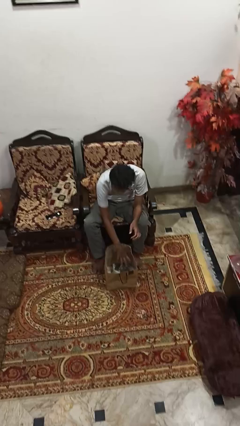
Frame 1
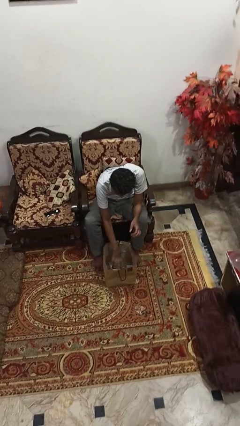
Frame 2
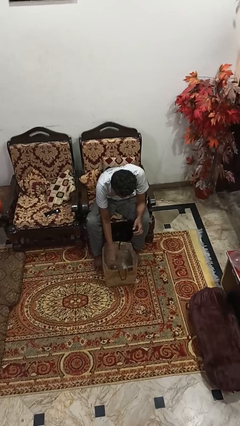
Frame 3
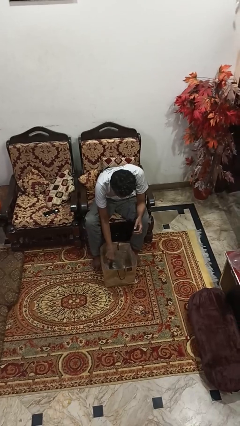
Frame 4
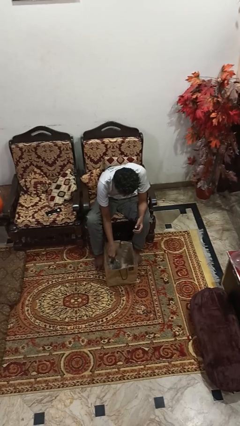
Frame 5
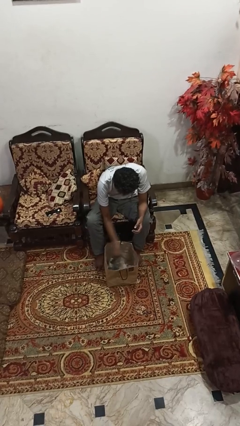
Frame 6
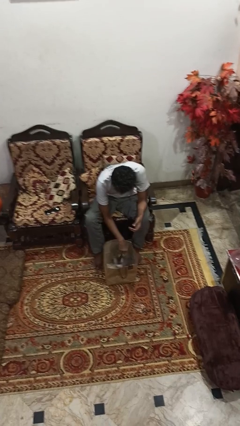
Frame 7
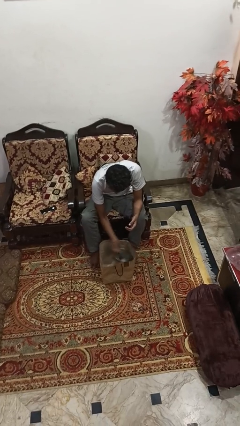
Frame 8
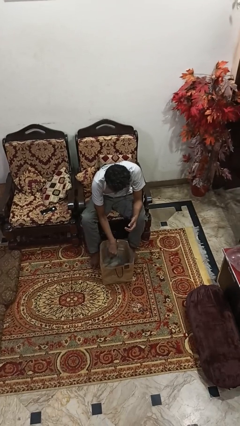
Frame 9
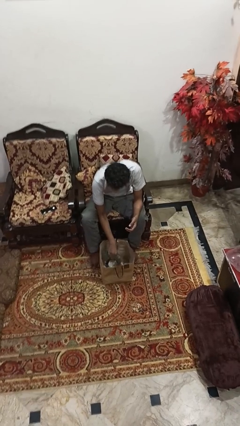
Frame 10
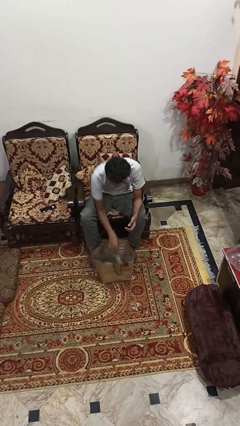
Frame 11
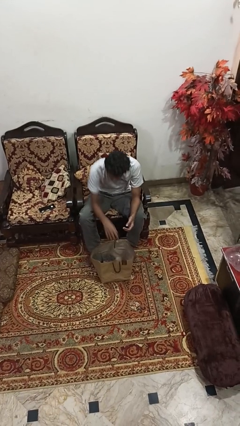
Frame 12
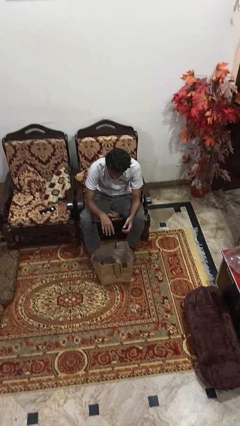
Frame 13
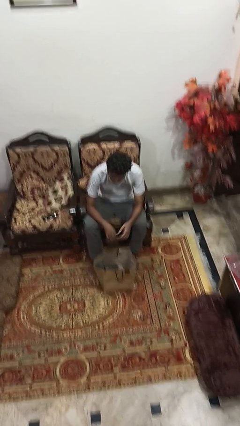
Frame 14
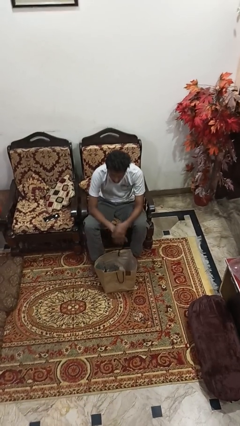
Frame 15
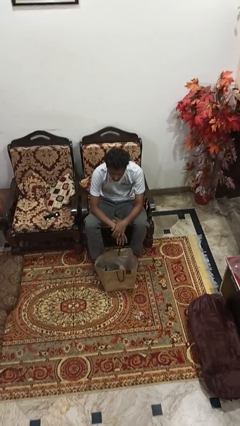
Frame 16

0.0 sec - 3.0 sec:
person searches in bag

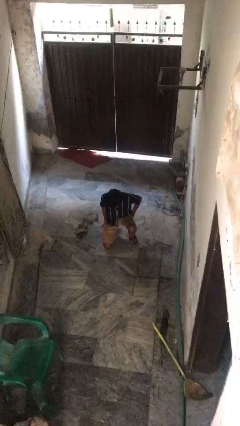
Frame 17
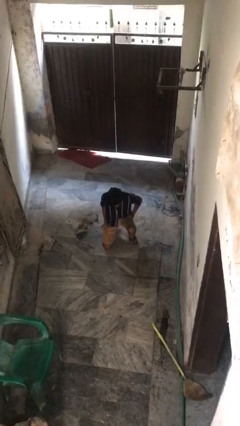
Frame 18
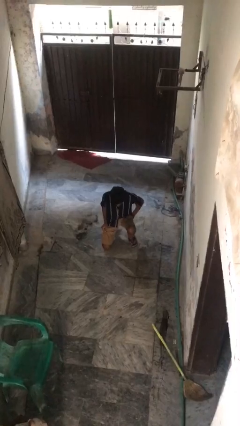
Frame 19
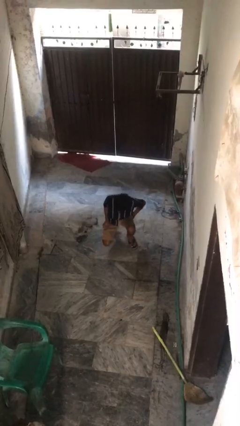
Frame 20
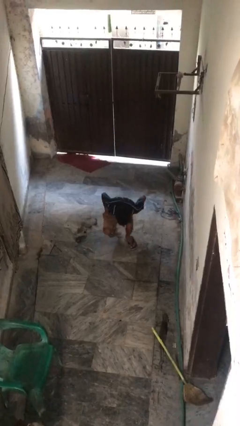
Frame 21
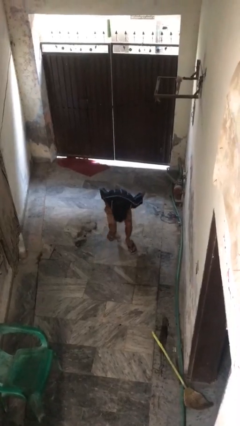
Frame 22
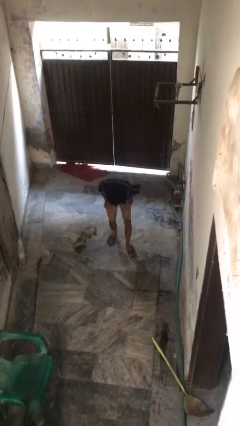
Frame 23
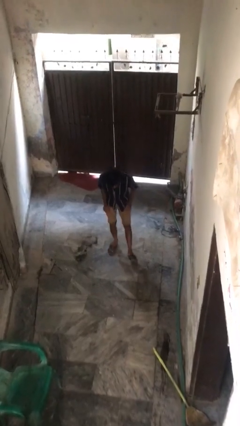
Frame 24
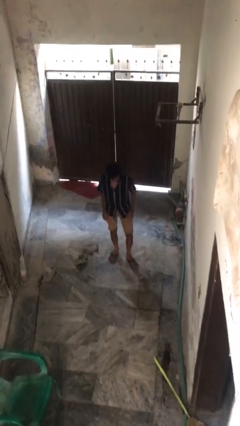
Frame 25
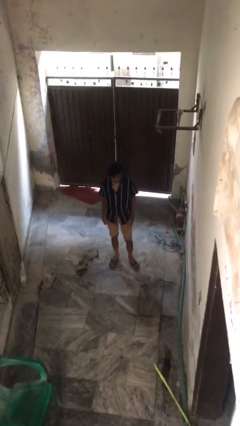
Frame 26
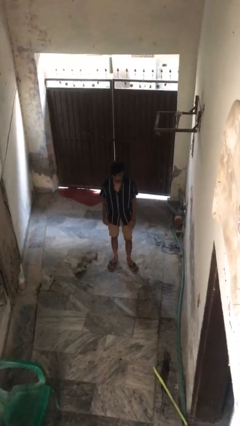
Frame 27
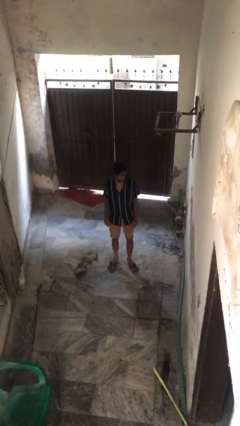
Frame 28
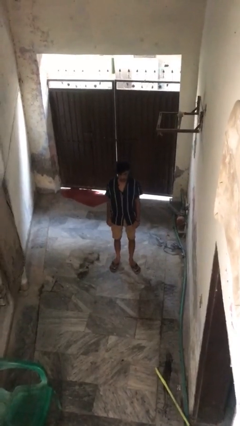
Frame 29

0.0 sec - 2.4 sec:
person stands up from floor

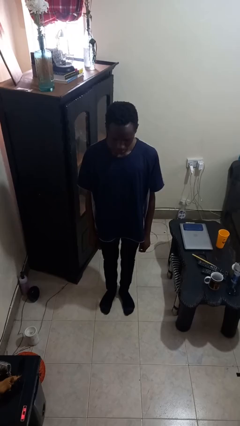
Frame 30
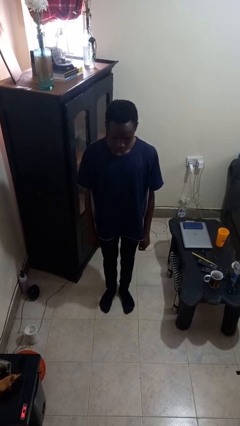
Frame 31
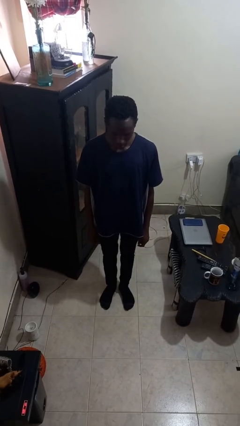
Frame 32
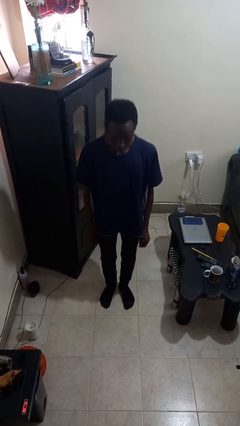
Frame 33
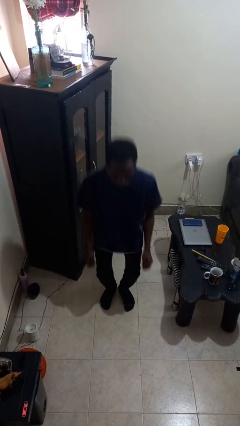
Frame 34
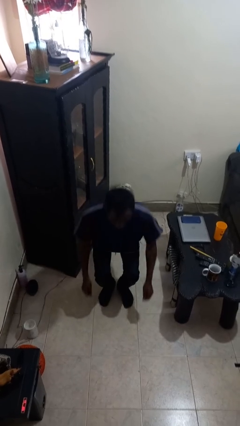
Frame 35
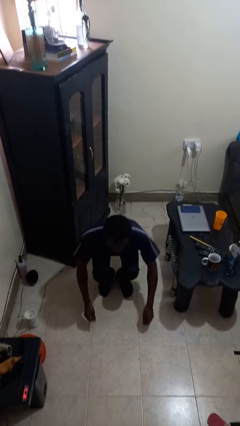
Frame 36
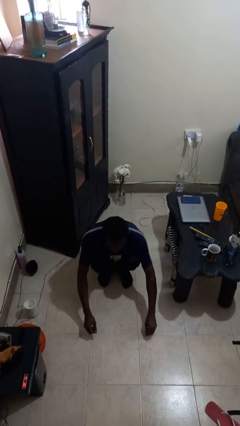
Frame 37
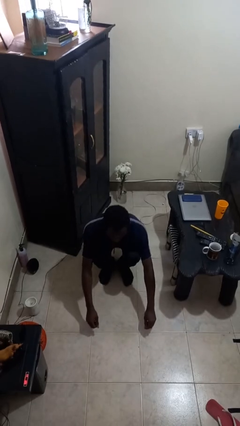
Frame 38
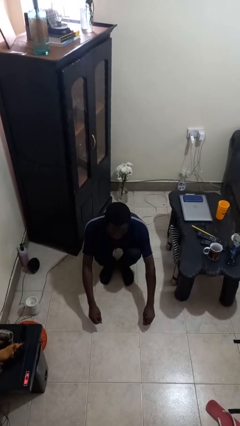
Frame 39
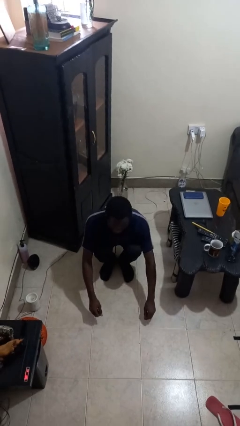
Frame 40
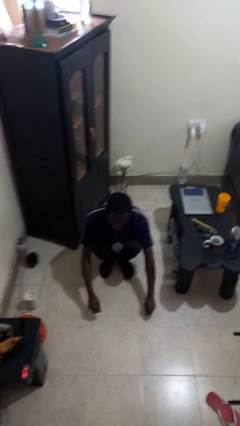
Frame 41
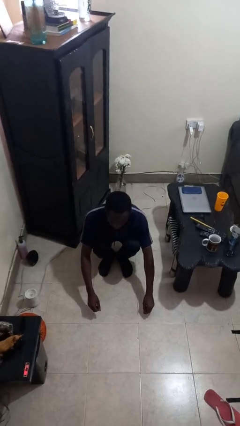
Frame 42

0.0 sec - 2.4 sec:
person squats

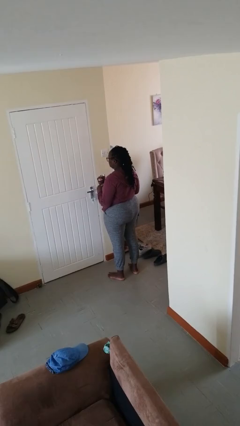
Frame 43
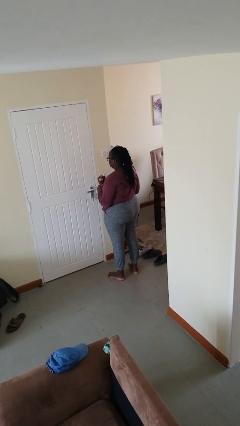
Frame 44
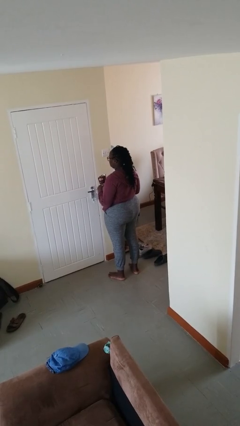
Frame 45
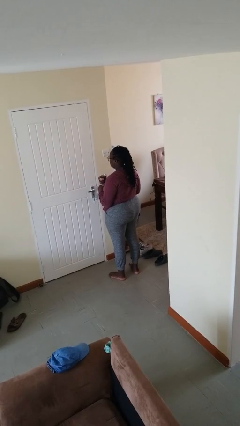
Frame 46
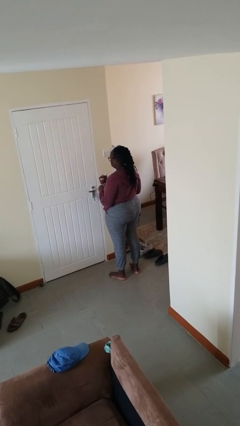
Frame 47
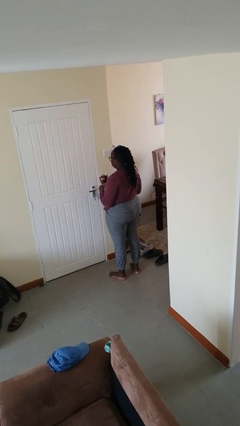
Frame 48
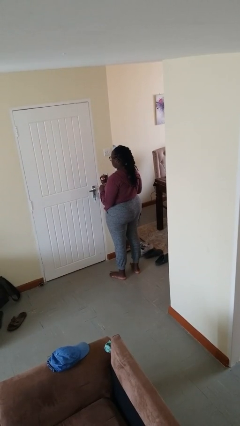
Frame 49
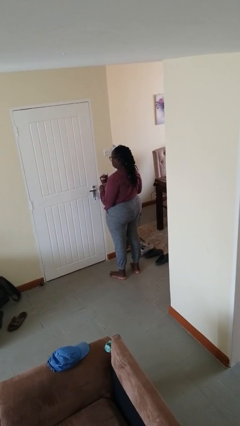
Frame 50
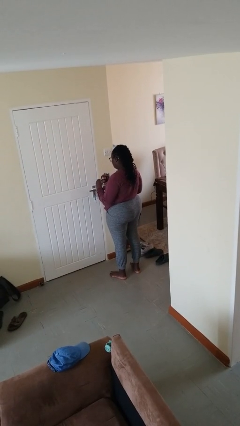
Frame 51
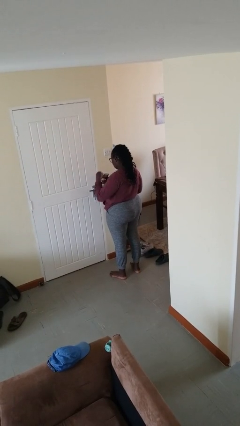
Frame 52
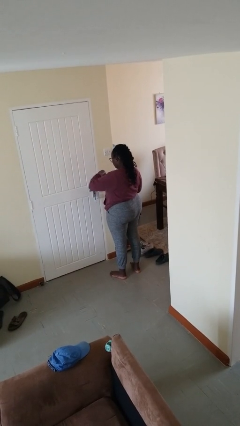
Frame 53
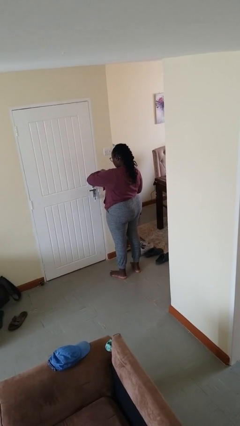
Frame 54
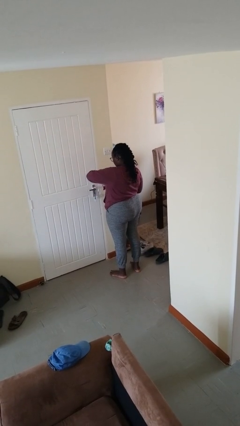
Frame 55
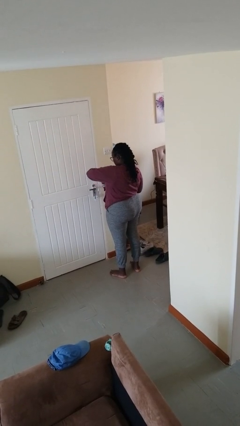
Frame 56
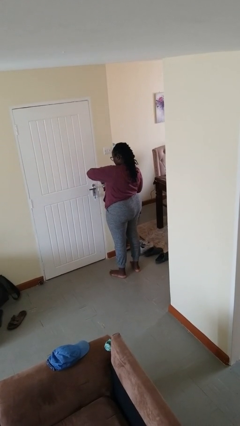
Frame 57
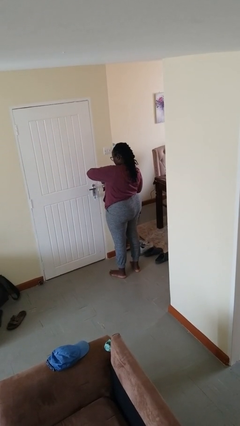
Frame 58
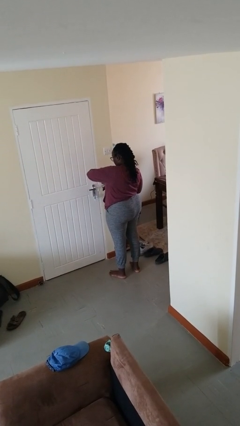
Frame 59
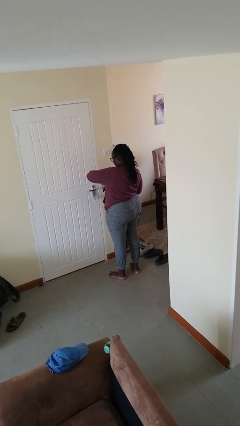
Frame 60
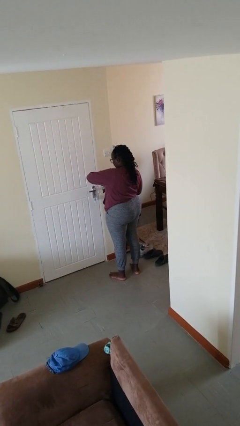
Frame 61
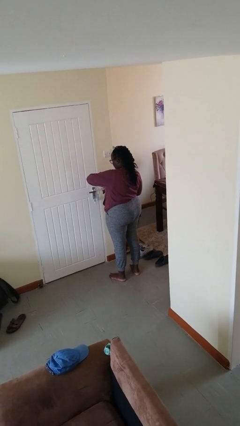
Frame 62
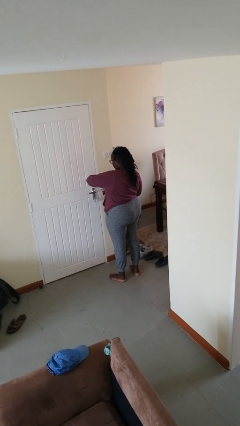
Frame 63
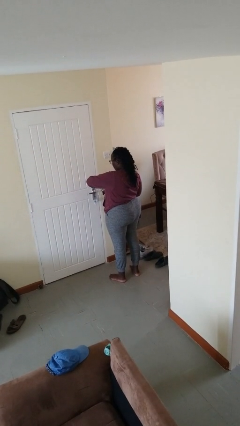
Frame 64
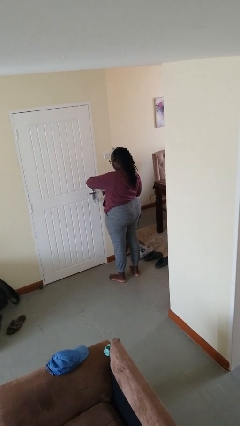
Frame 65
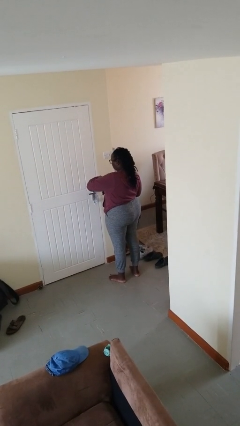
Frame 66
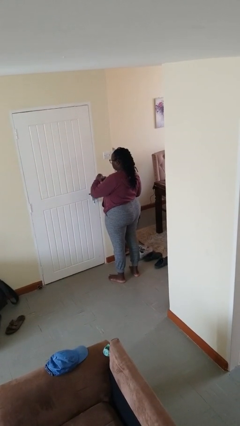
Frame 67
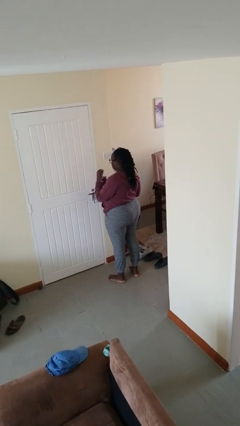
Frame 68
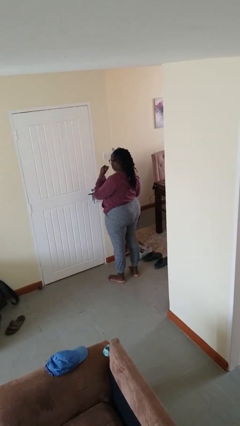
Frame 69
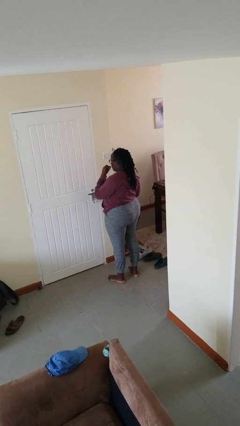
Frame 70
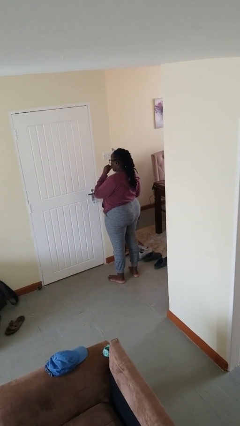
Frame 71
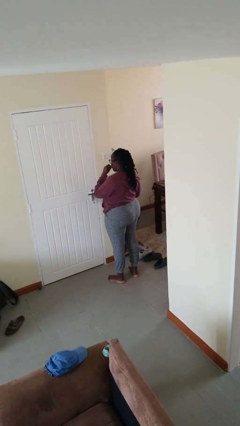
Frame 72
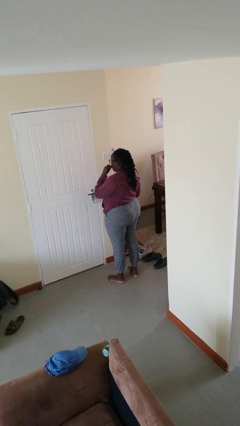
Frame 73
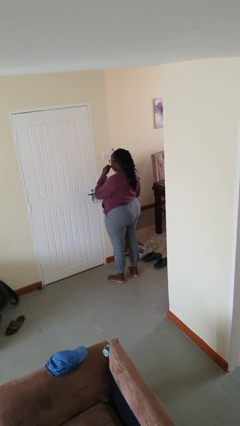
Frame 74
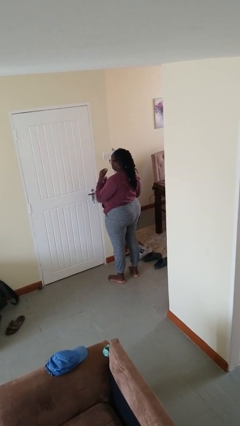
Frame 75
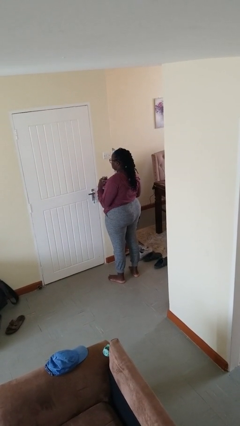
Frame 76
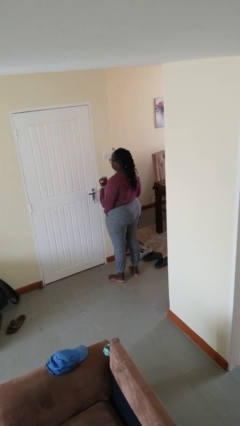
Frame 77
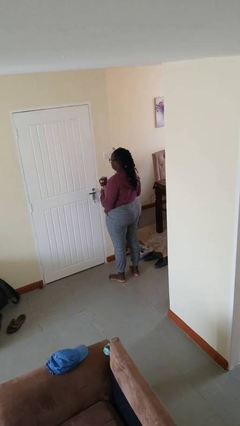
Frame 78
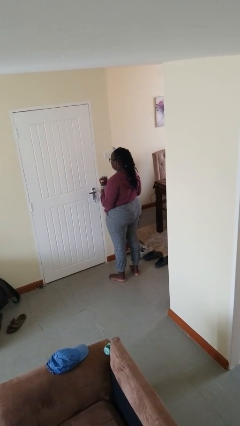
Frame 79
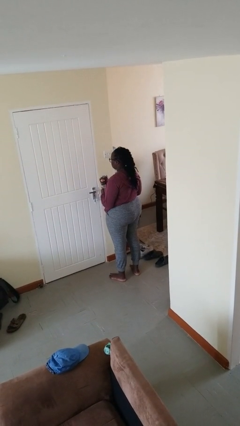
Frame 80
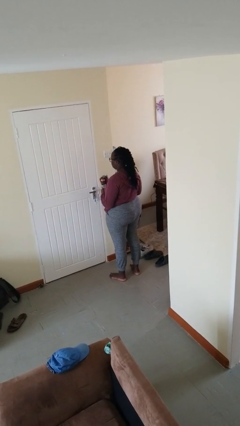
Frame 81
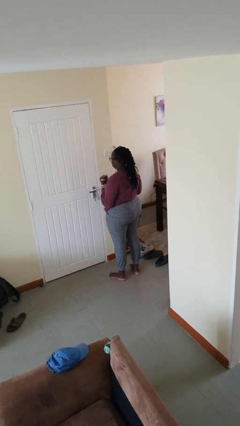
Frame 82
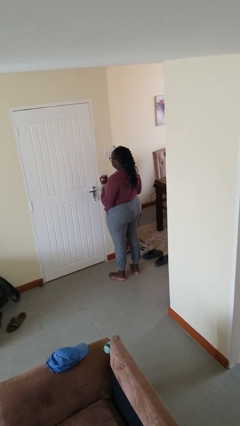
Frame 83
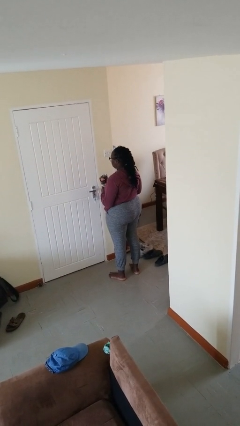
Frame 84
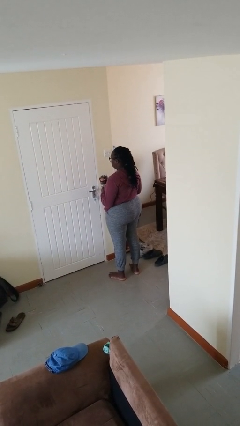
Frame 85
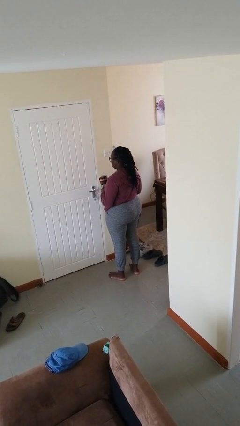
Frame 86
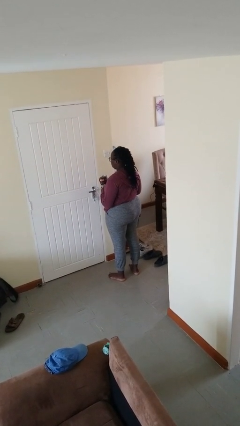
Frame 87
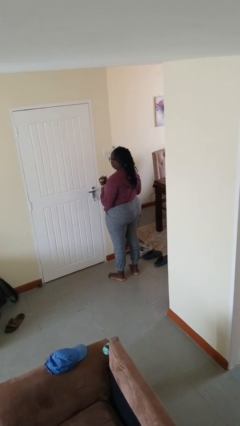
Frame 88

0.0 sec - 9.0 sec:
person eats snack from bag

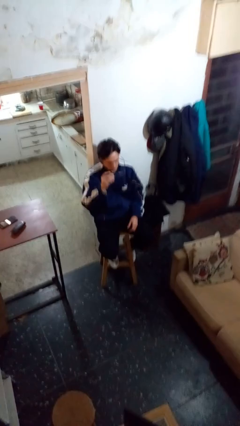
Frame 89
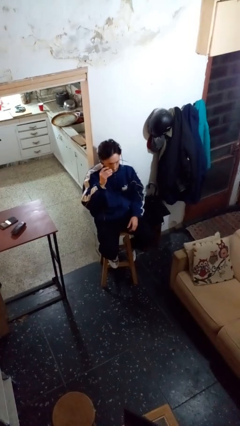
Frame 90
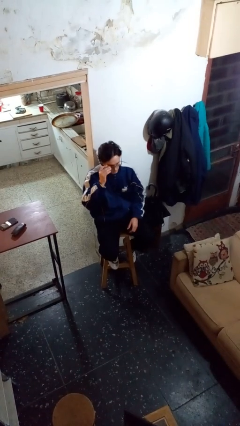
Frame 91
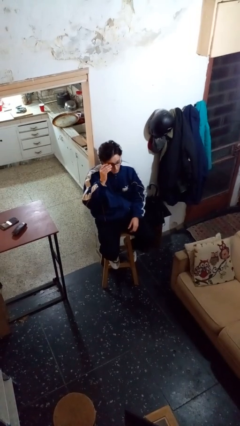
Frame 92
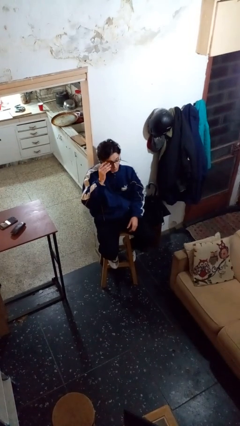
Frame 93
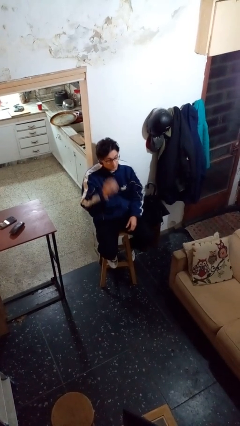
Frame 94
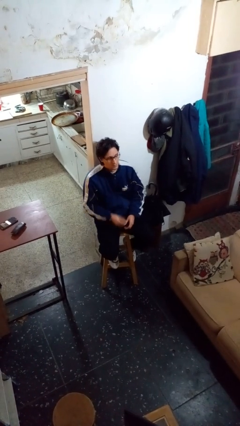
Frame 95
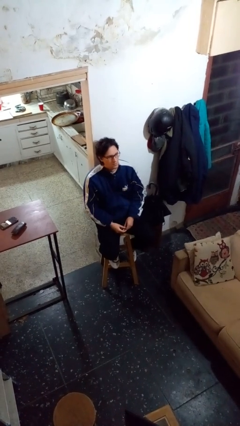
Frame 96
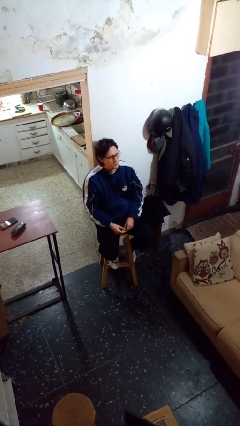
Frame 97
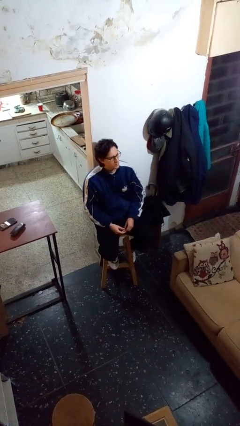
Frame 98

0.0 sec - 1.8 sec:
person puts on glasses
